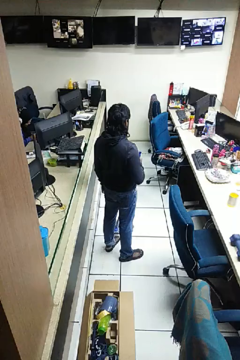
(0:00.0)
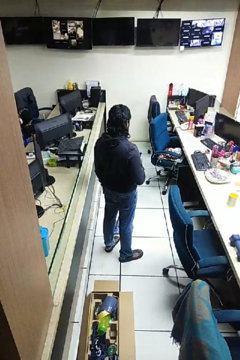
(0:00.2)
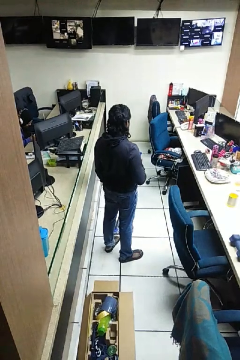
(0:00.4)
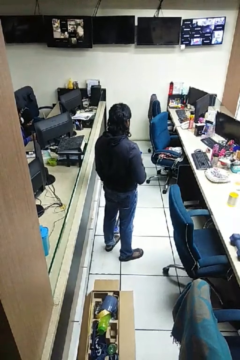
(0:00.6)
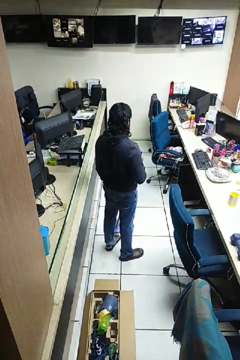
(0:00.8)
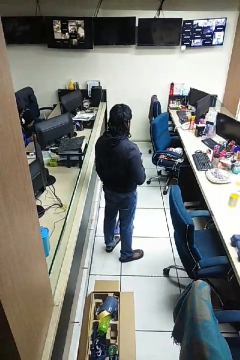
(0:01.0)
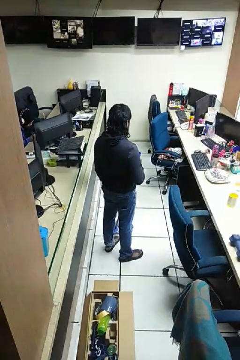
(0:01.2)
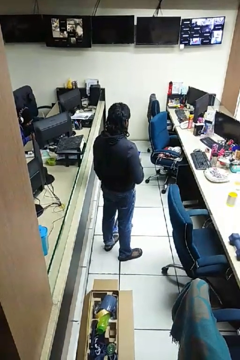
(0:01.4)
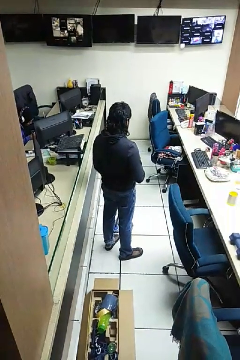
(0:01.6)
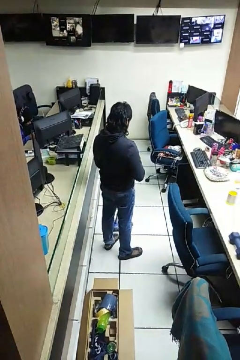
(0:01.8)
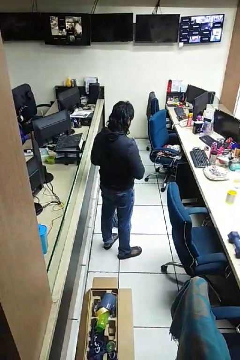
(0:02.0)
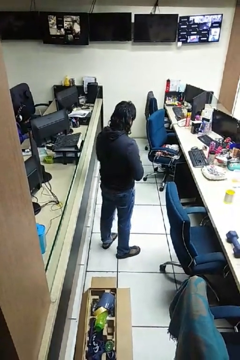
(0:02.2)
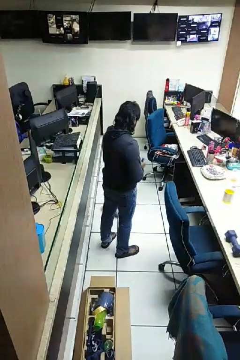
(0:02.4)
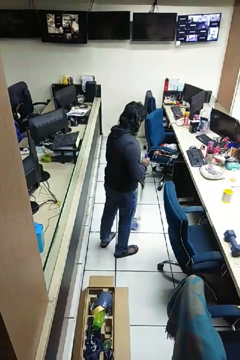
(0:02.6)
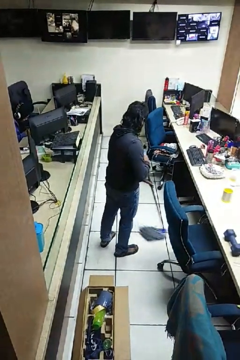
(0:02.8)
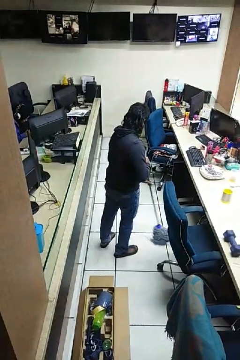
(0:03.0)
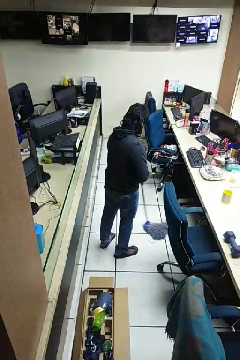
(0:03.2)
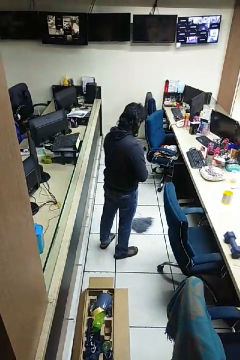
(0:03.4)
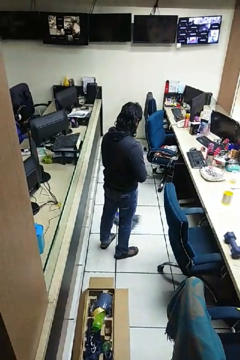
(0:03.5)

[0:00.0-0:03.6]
person mops

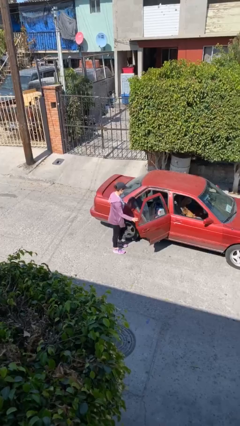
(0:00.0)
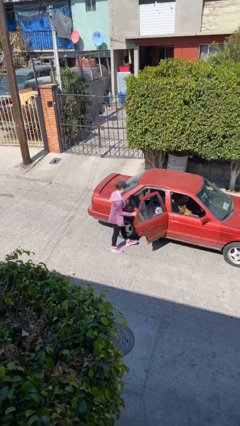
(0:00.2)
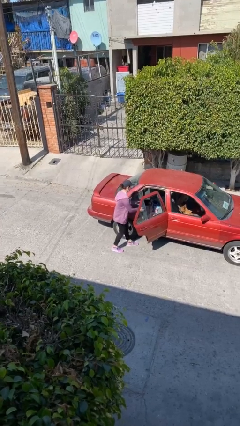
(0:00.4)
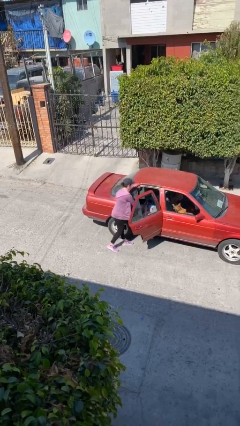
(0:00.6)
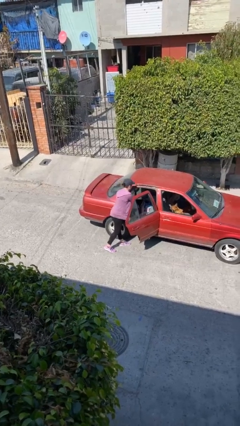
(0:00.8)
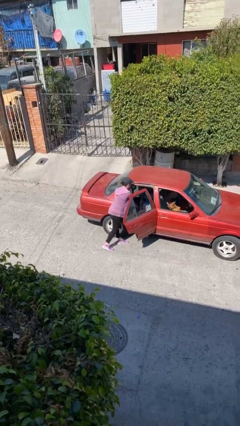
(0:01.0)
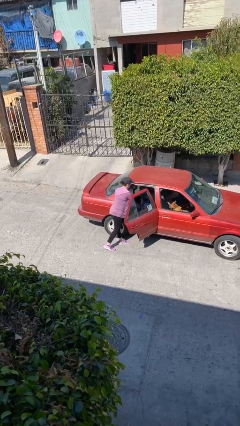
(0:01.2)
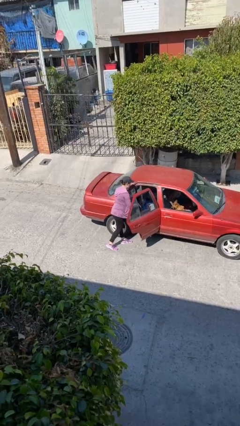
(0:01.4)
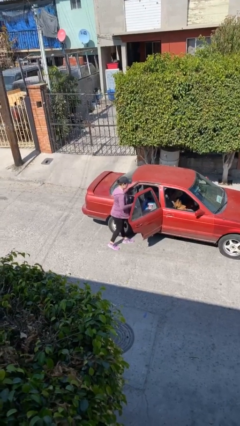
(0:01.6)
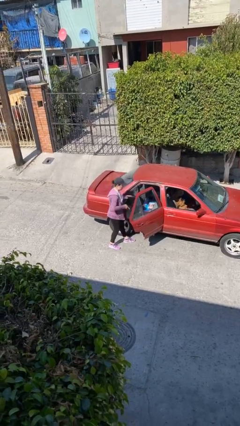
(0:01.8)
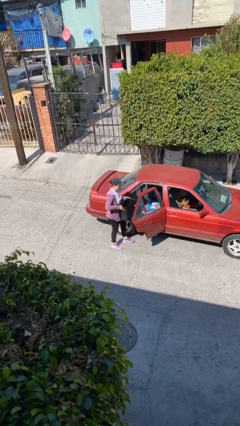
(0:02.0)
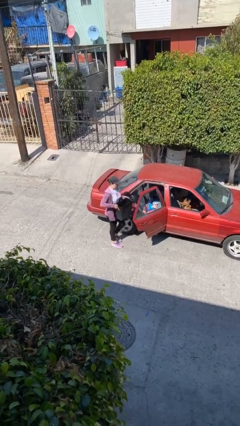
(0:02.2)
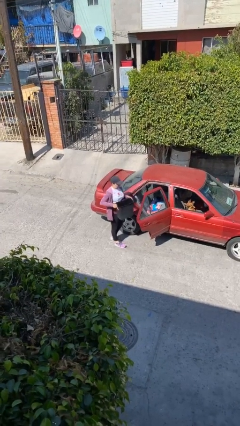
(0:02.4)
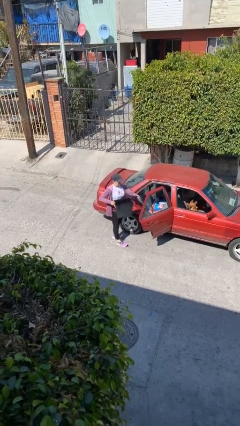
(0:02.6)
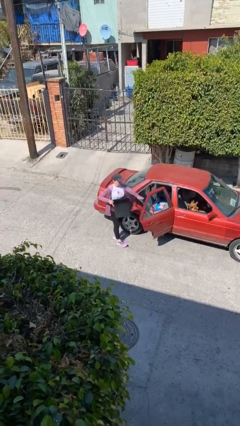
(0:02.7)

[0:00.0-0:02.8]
person unloads car

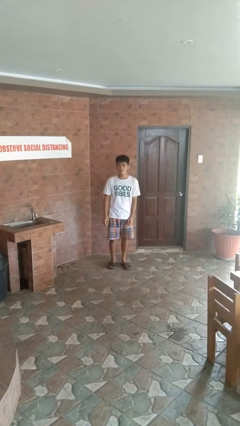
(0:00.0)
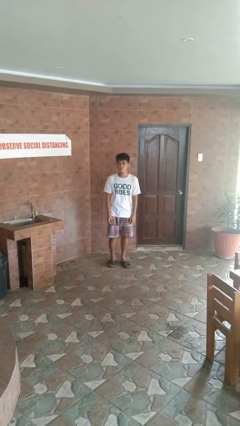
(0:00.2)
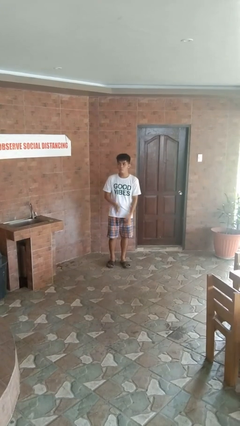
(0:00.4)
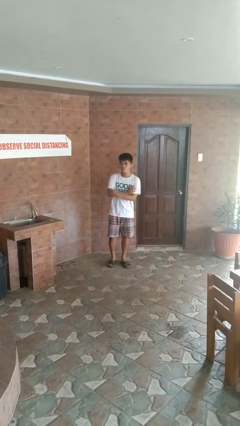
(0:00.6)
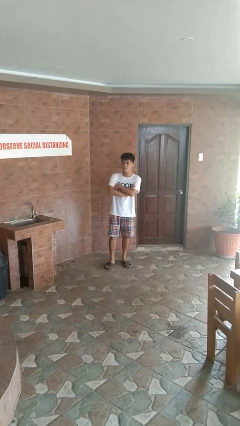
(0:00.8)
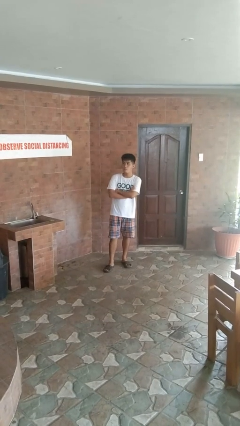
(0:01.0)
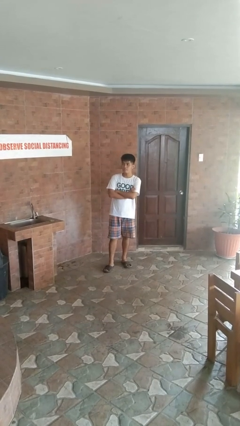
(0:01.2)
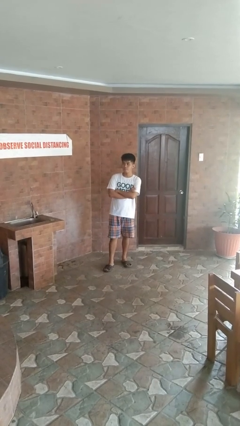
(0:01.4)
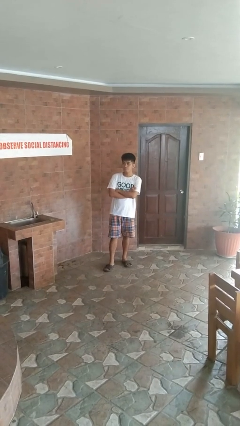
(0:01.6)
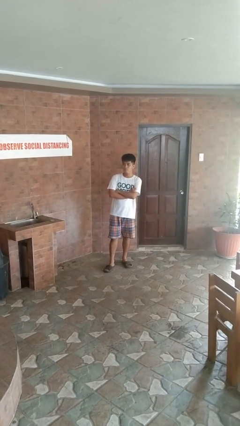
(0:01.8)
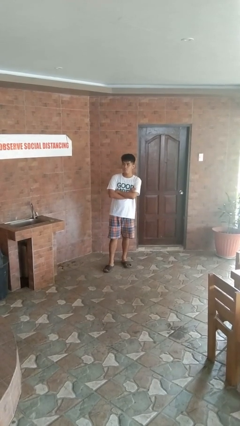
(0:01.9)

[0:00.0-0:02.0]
person crosses arms

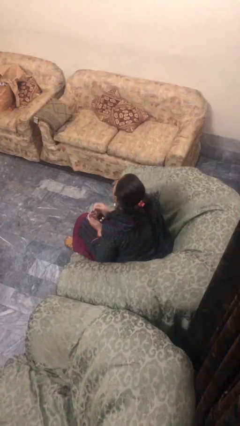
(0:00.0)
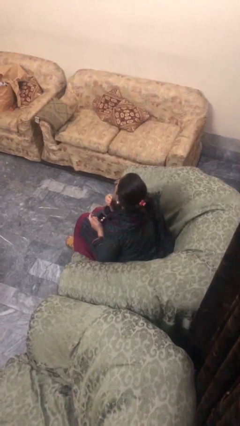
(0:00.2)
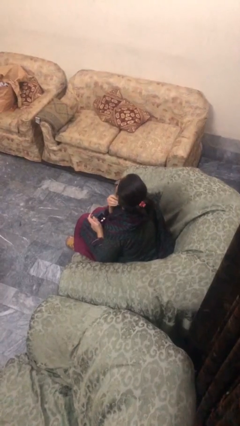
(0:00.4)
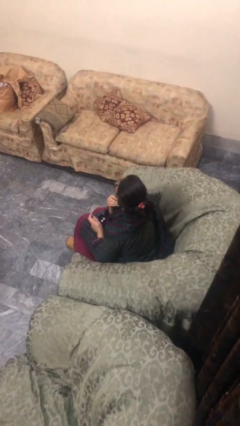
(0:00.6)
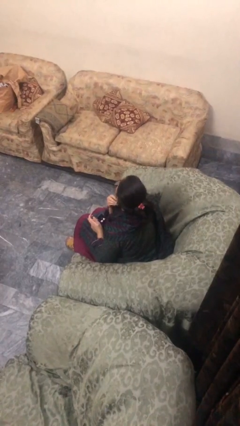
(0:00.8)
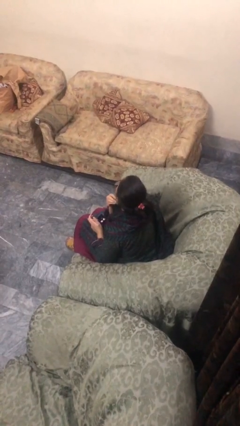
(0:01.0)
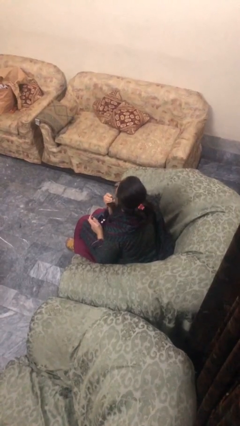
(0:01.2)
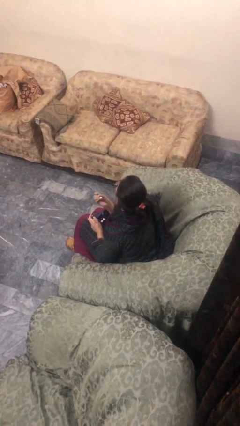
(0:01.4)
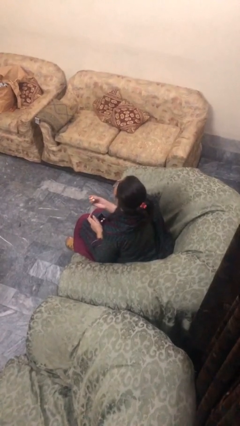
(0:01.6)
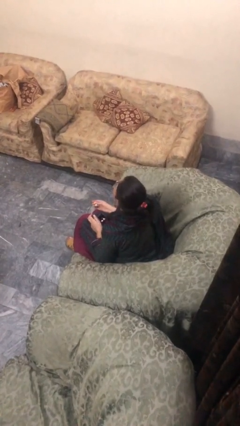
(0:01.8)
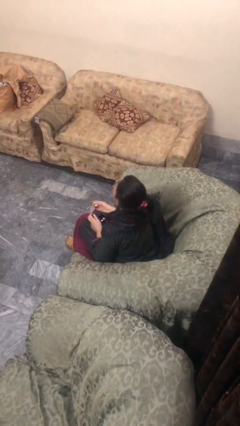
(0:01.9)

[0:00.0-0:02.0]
person takes off earrings

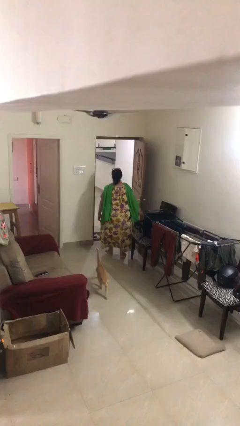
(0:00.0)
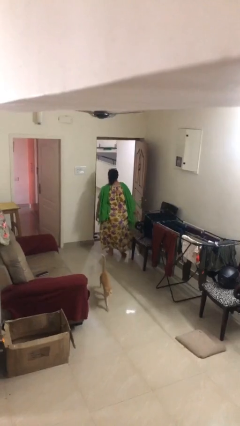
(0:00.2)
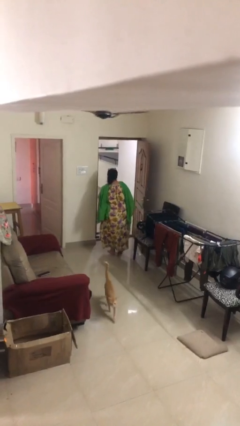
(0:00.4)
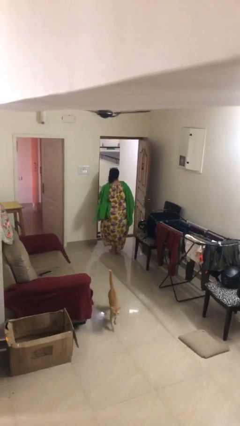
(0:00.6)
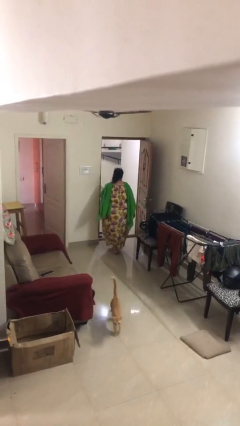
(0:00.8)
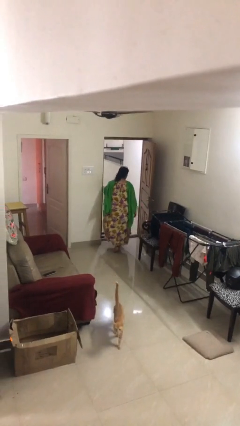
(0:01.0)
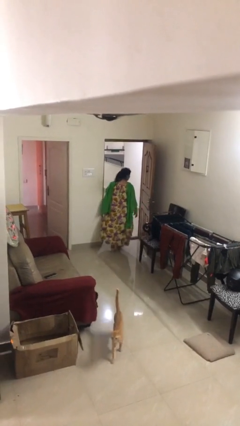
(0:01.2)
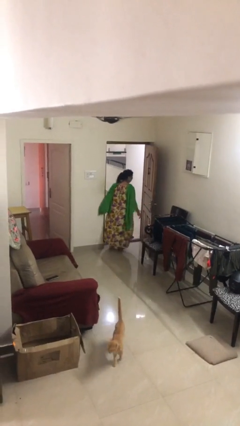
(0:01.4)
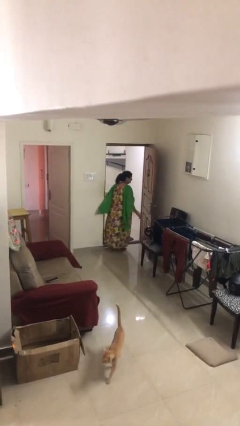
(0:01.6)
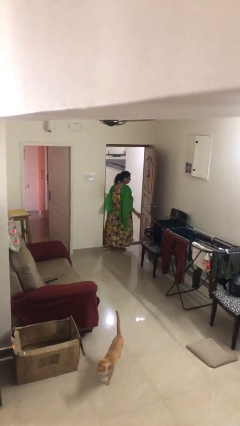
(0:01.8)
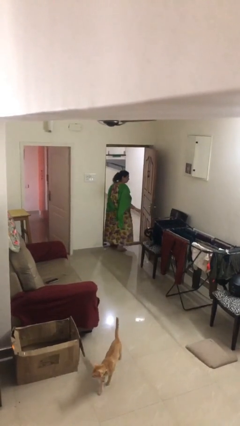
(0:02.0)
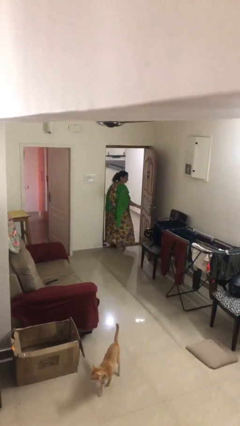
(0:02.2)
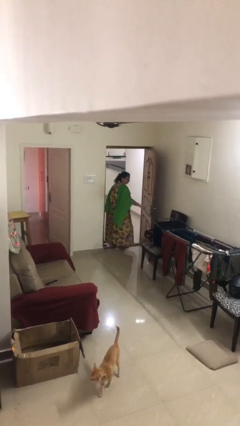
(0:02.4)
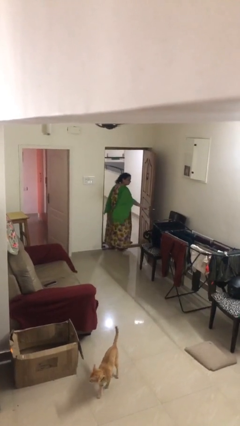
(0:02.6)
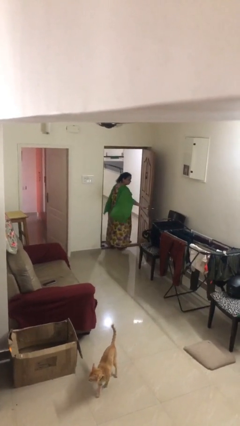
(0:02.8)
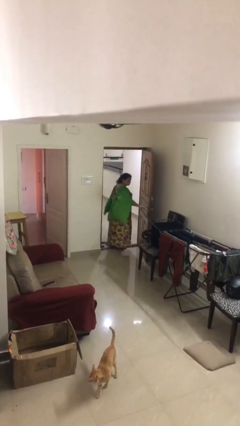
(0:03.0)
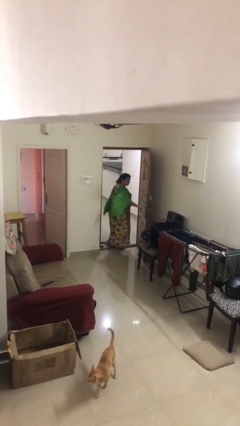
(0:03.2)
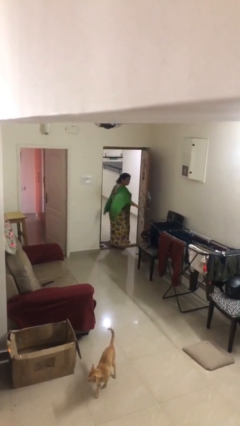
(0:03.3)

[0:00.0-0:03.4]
person exits scene through structure

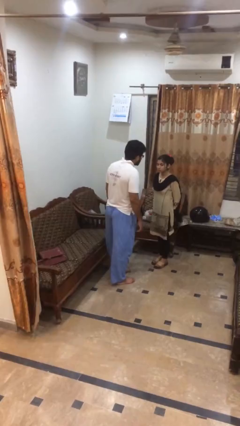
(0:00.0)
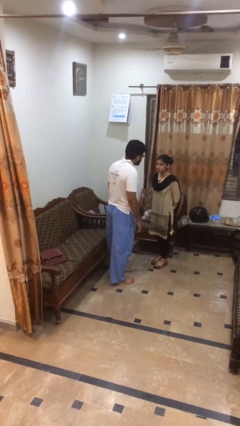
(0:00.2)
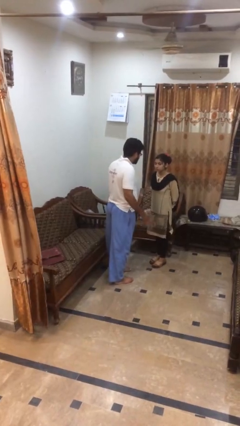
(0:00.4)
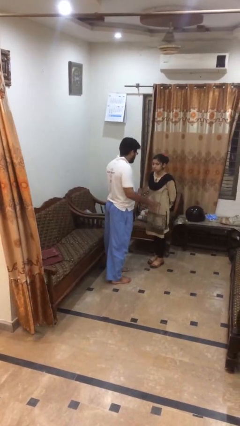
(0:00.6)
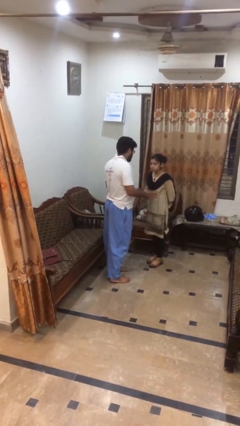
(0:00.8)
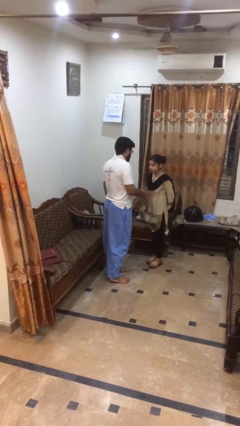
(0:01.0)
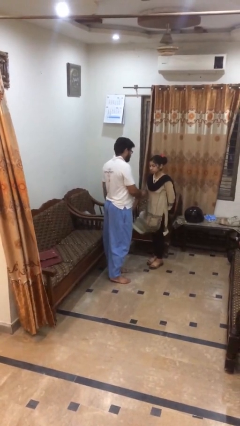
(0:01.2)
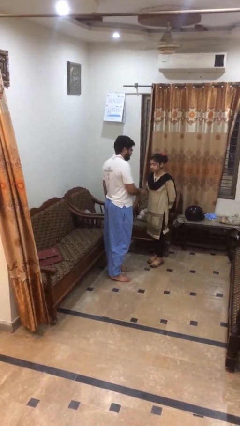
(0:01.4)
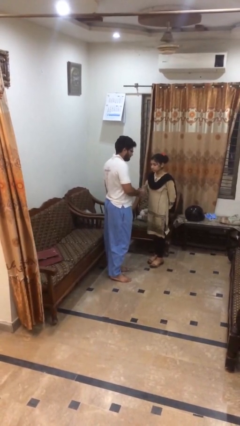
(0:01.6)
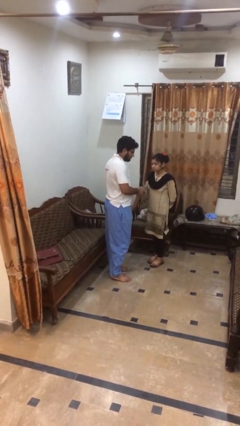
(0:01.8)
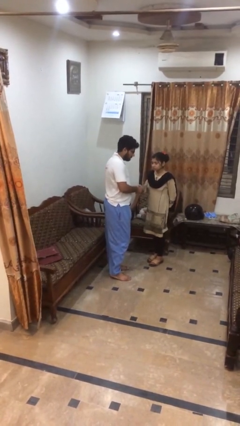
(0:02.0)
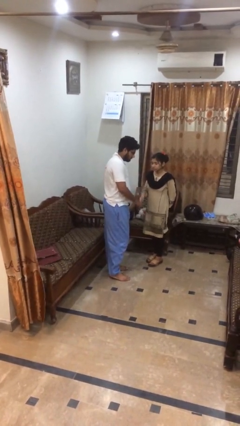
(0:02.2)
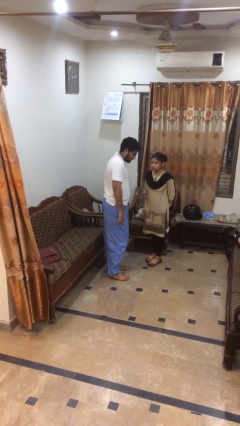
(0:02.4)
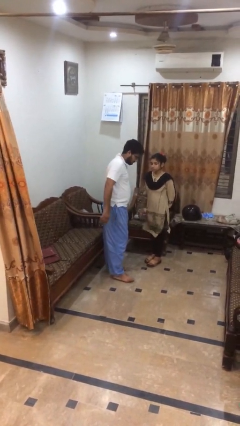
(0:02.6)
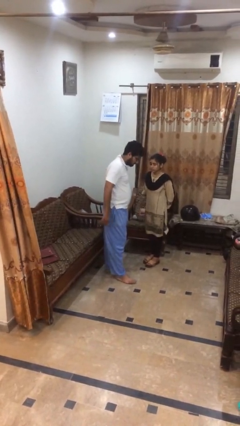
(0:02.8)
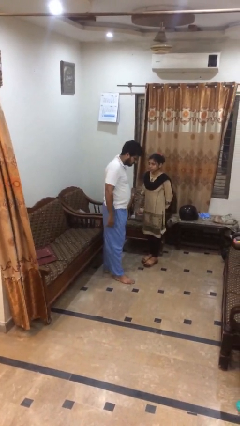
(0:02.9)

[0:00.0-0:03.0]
person shakes hand

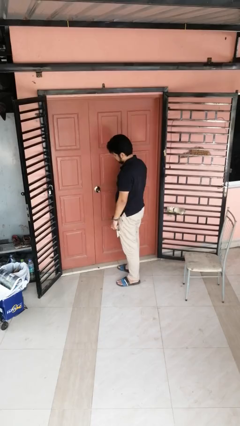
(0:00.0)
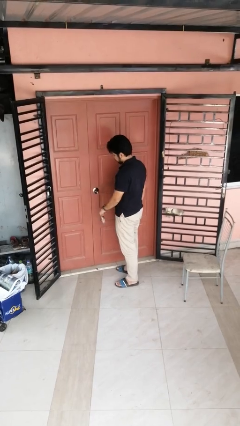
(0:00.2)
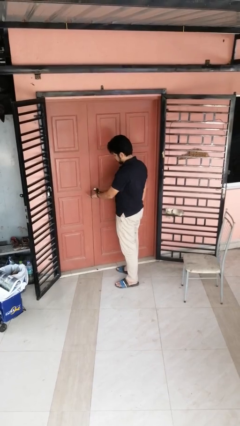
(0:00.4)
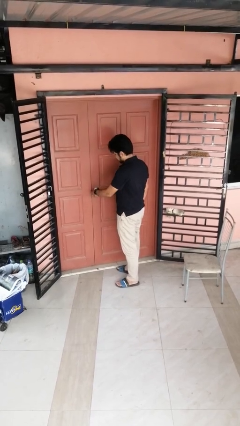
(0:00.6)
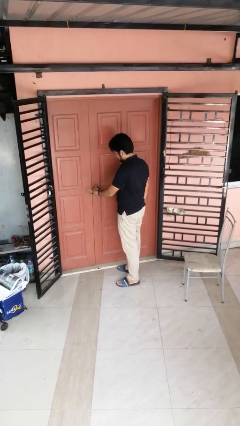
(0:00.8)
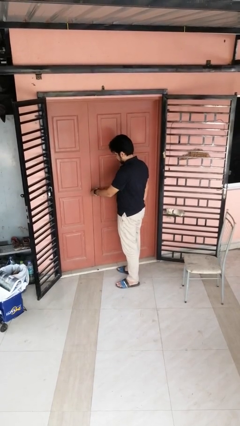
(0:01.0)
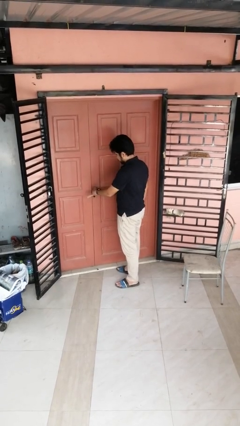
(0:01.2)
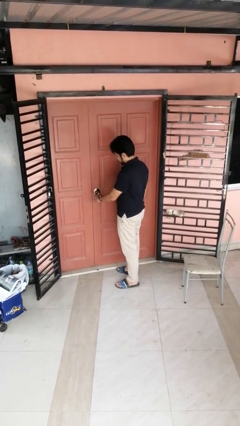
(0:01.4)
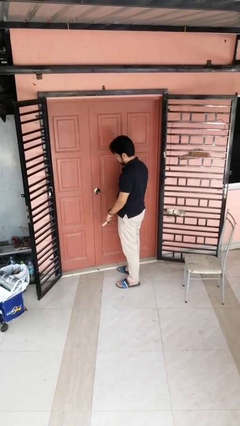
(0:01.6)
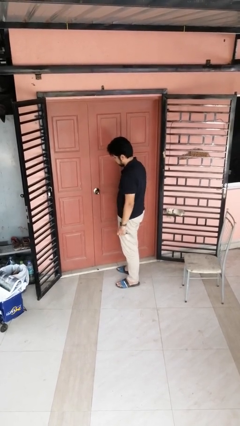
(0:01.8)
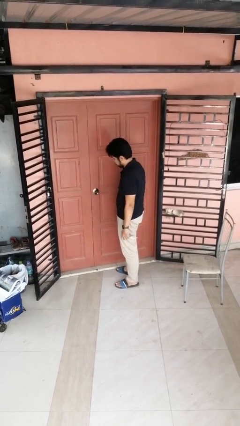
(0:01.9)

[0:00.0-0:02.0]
person unlocks door with keys
